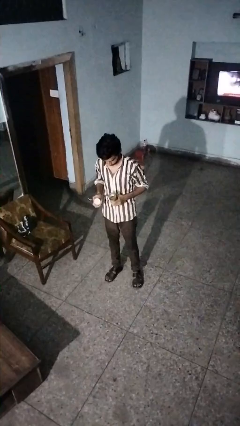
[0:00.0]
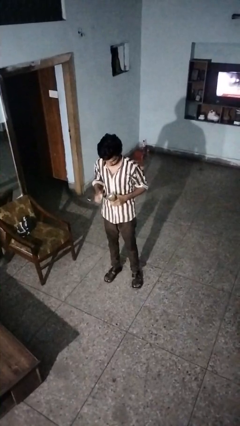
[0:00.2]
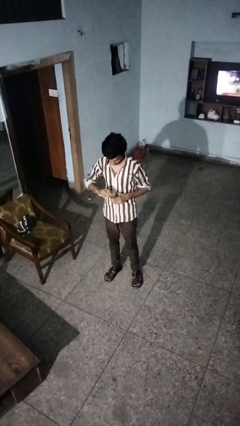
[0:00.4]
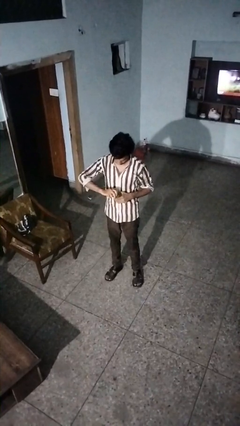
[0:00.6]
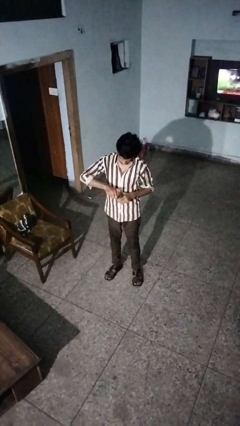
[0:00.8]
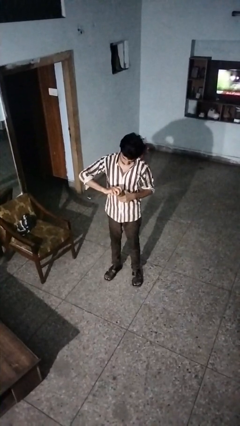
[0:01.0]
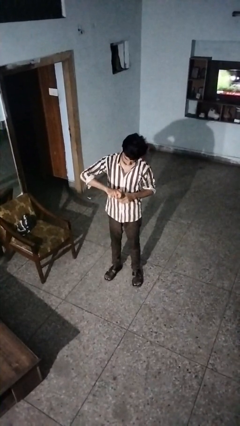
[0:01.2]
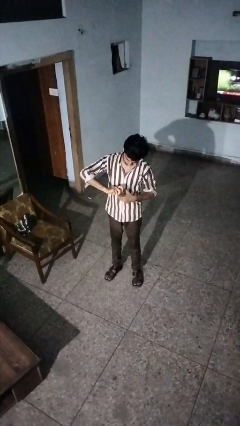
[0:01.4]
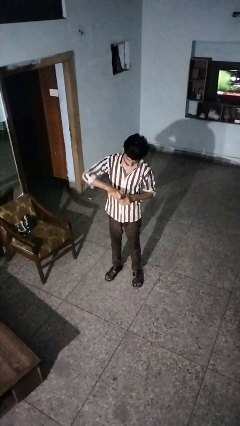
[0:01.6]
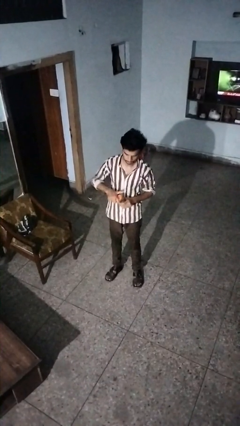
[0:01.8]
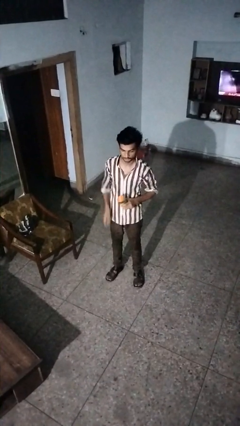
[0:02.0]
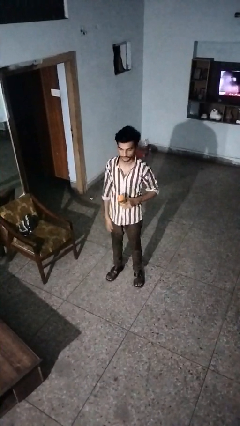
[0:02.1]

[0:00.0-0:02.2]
person closes jar

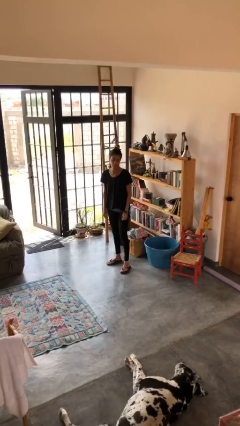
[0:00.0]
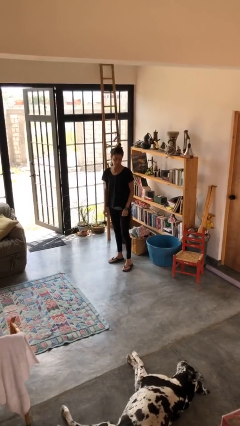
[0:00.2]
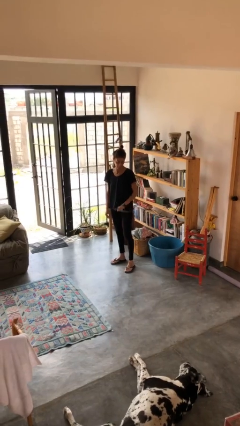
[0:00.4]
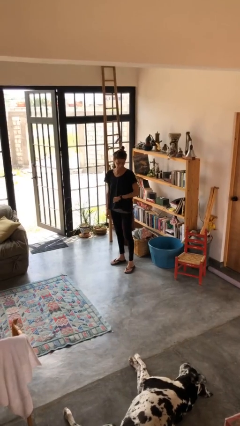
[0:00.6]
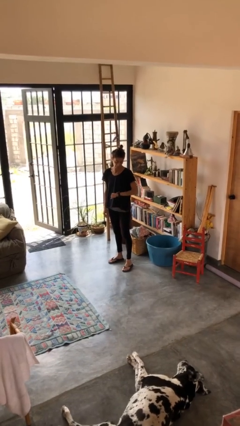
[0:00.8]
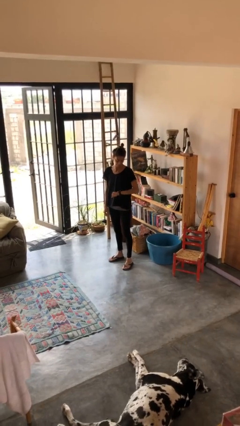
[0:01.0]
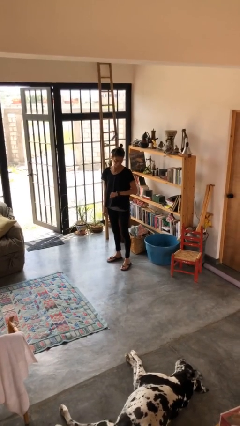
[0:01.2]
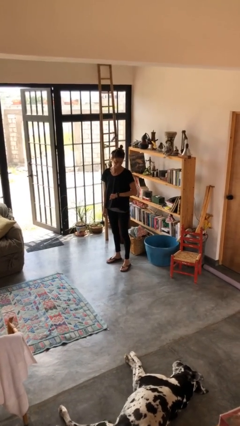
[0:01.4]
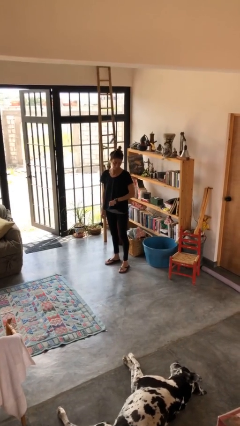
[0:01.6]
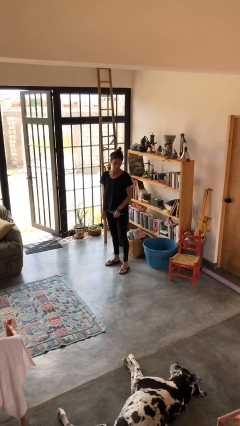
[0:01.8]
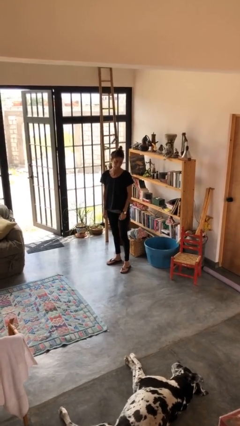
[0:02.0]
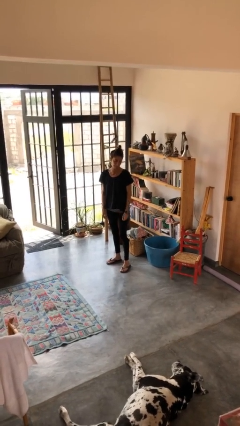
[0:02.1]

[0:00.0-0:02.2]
person looks at wristwatch

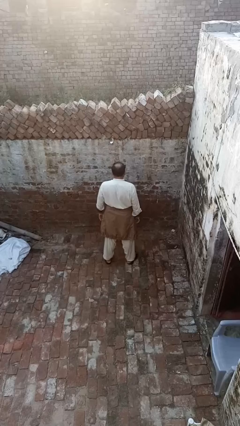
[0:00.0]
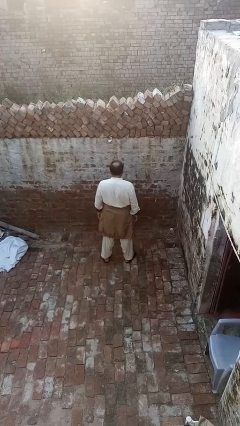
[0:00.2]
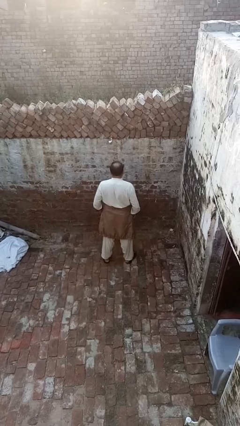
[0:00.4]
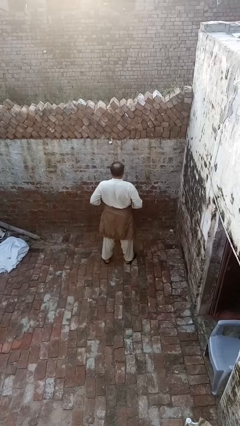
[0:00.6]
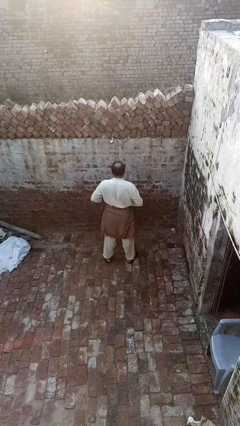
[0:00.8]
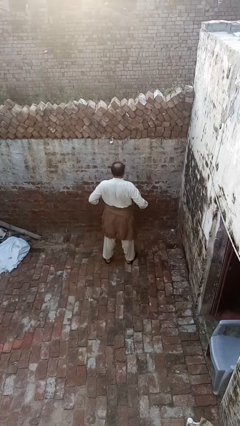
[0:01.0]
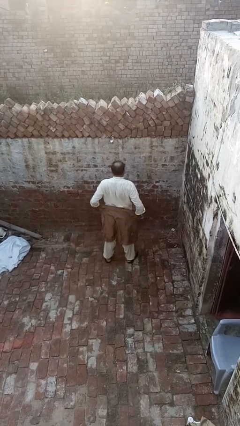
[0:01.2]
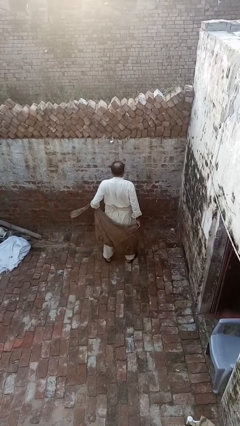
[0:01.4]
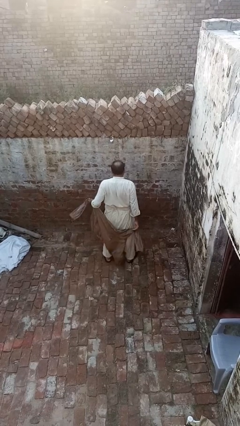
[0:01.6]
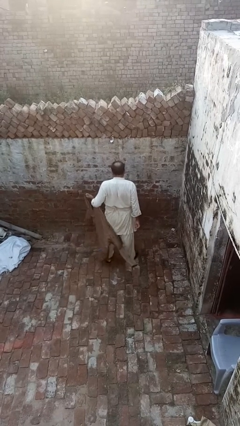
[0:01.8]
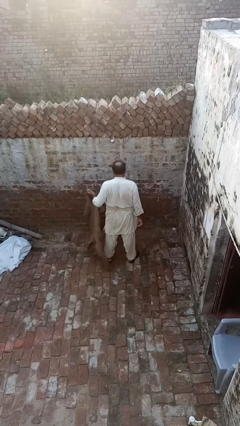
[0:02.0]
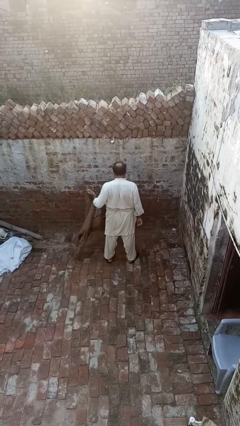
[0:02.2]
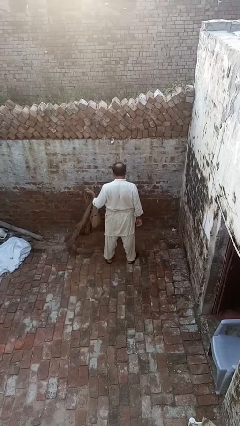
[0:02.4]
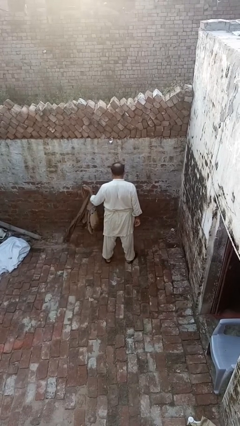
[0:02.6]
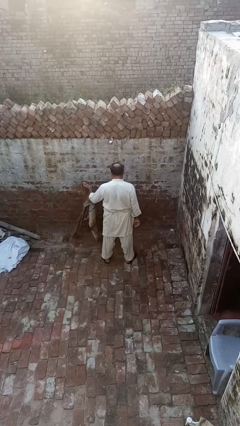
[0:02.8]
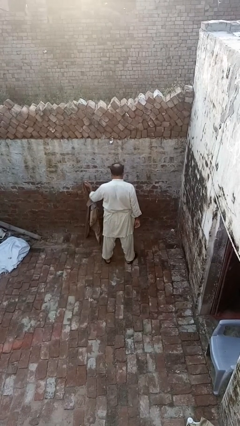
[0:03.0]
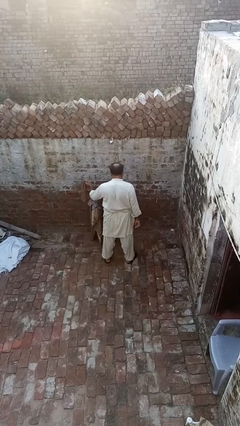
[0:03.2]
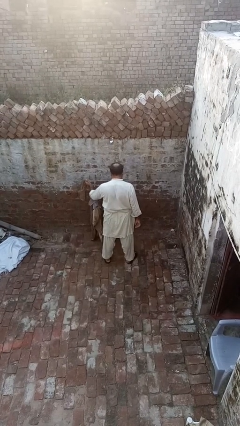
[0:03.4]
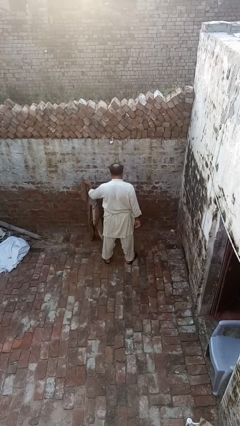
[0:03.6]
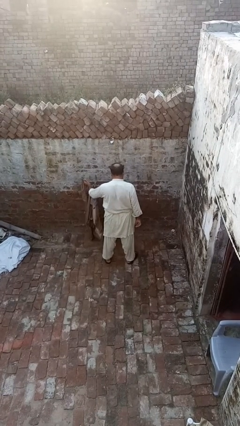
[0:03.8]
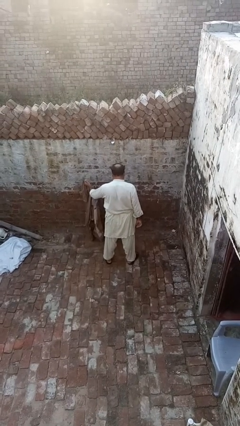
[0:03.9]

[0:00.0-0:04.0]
person unties jacket around waist

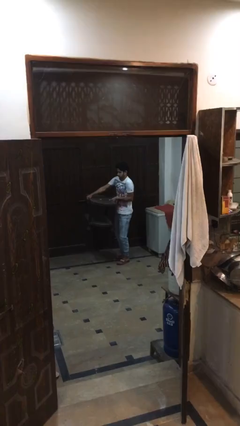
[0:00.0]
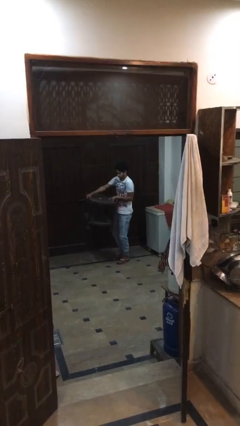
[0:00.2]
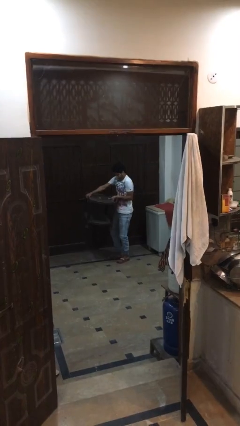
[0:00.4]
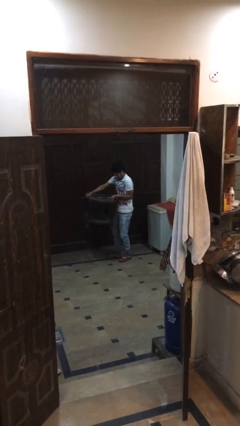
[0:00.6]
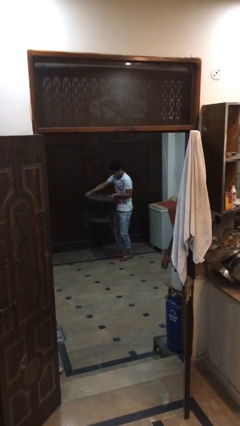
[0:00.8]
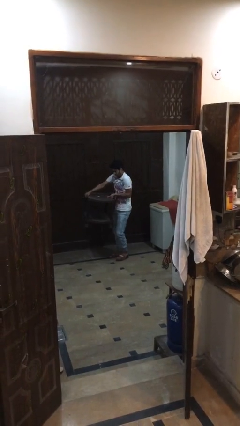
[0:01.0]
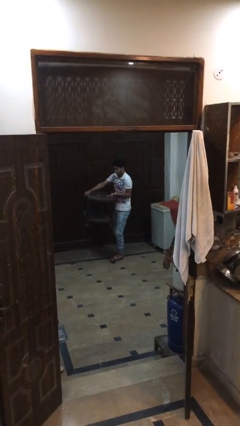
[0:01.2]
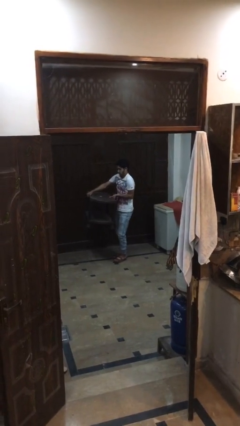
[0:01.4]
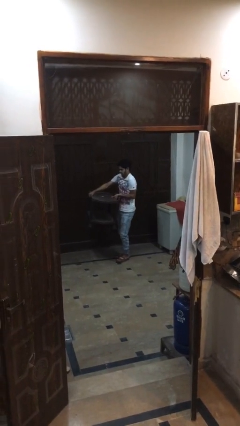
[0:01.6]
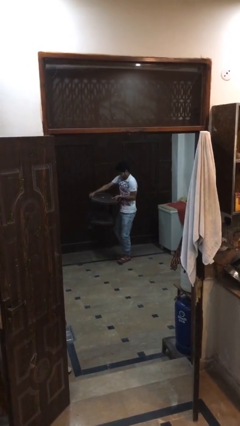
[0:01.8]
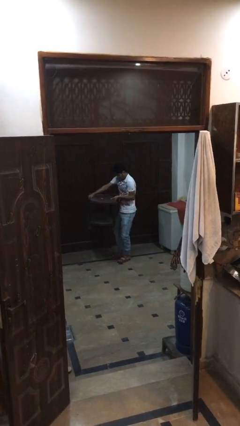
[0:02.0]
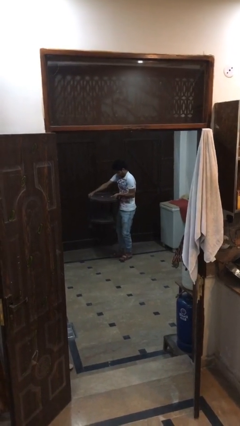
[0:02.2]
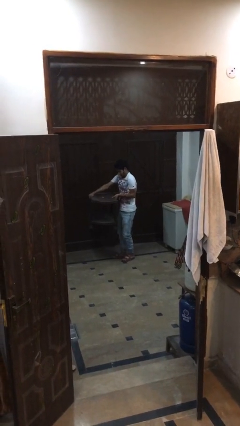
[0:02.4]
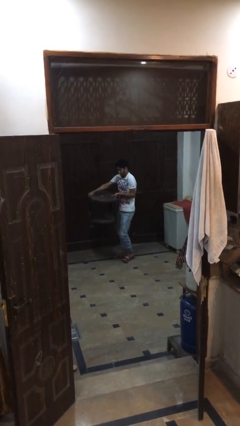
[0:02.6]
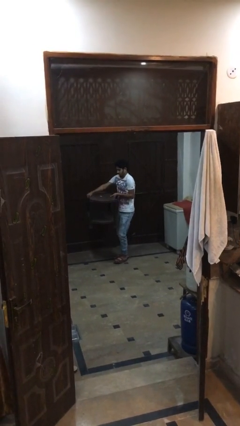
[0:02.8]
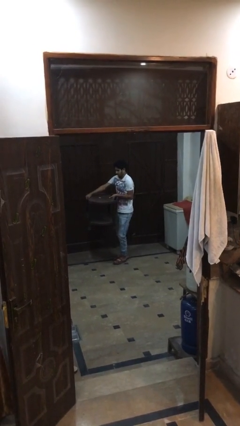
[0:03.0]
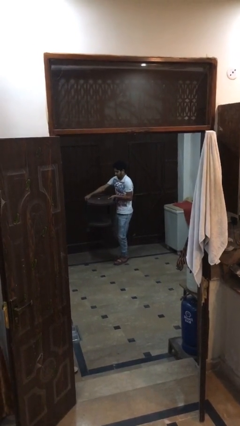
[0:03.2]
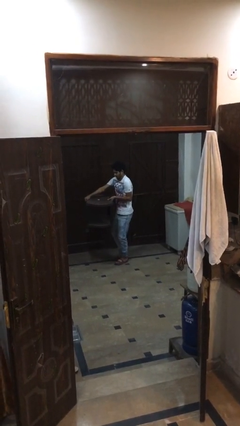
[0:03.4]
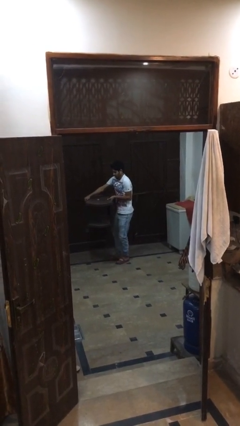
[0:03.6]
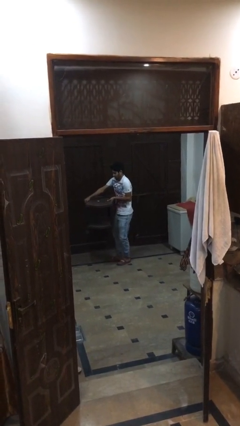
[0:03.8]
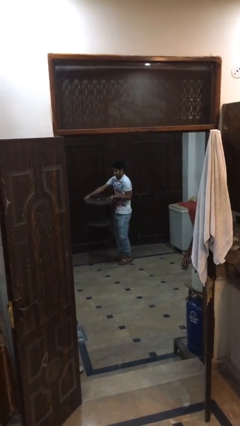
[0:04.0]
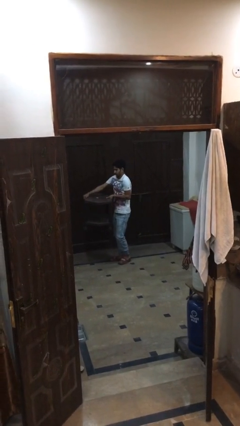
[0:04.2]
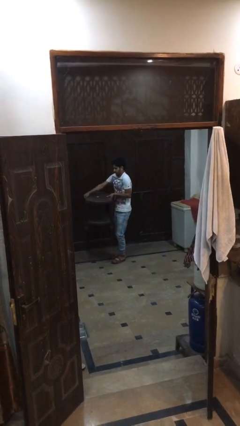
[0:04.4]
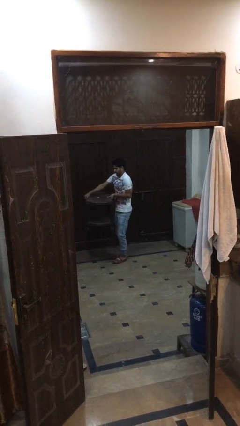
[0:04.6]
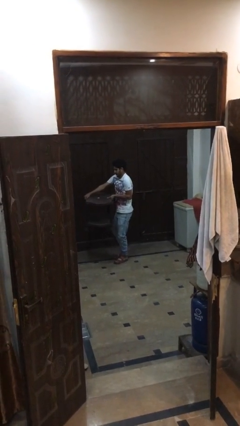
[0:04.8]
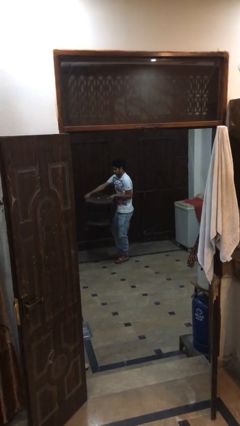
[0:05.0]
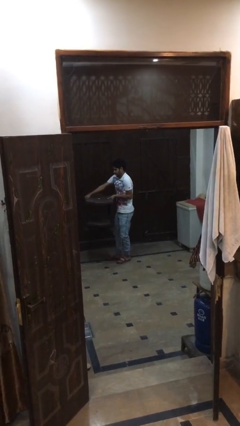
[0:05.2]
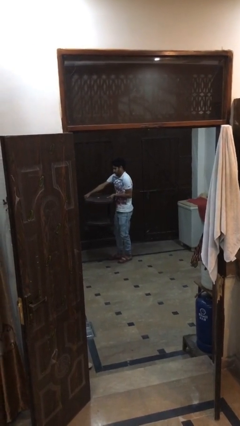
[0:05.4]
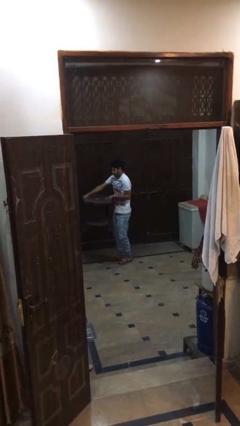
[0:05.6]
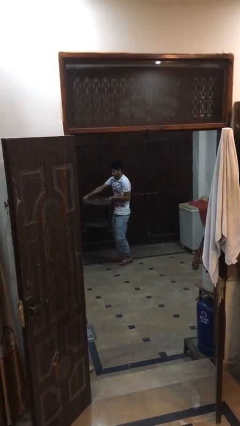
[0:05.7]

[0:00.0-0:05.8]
person carries heavy object

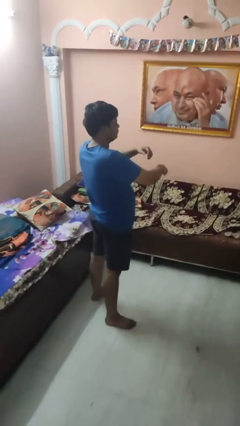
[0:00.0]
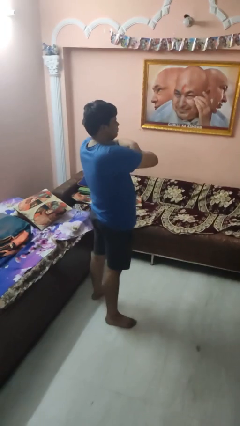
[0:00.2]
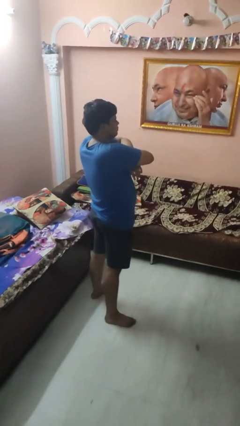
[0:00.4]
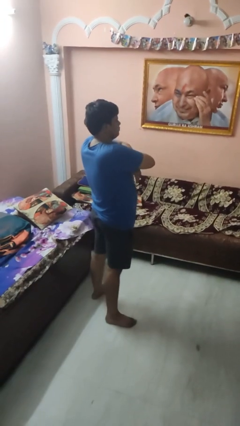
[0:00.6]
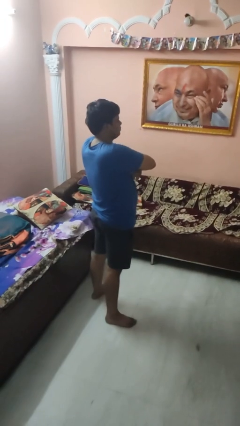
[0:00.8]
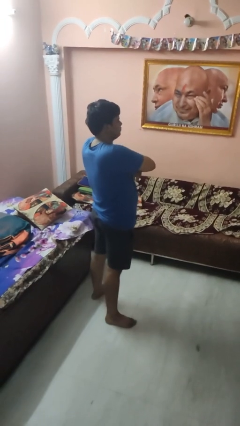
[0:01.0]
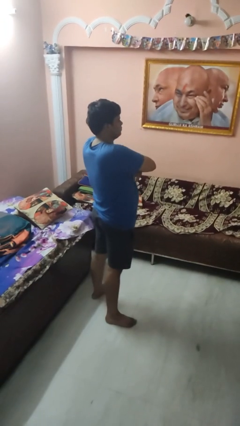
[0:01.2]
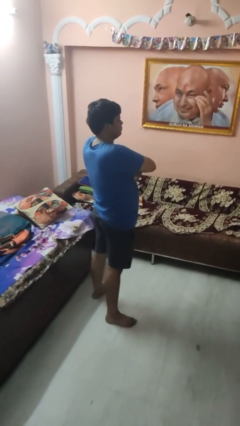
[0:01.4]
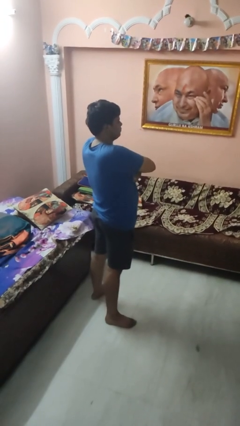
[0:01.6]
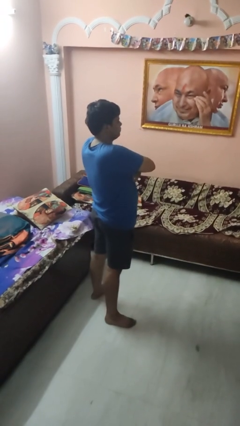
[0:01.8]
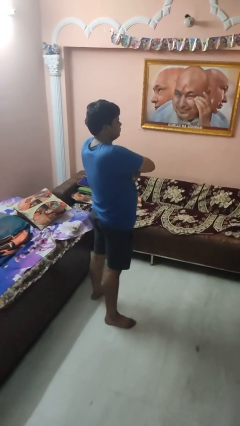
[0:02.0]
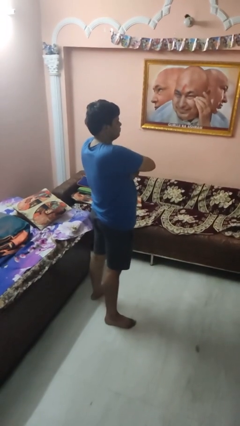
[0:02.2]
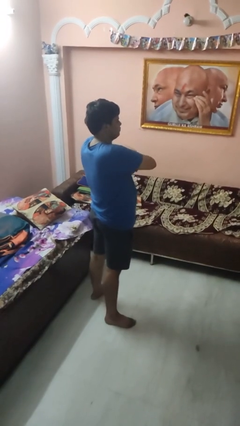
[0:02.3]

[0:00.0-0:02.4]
person crosses arms

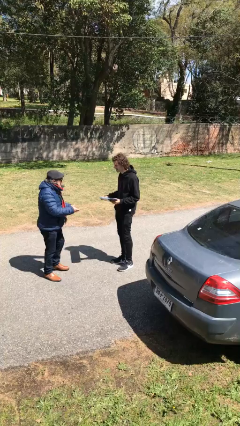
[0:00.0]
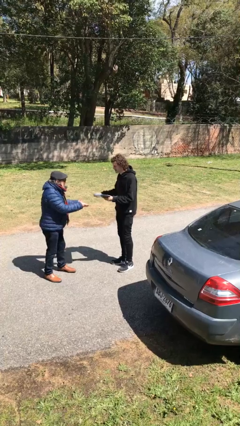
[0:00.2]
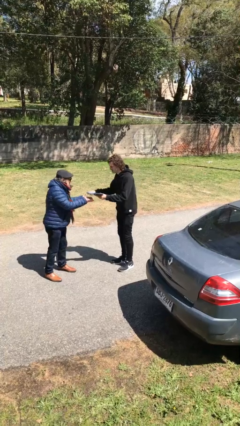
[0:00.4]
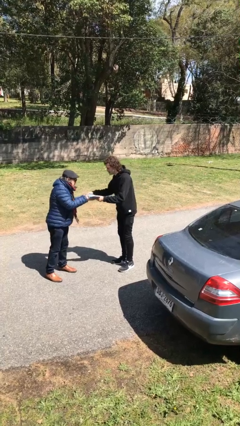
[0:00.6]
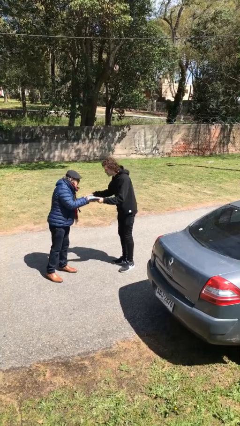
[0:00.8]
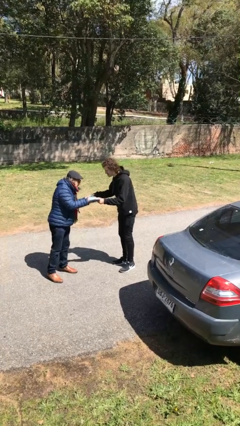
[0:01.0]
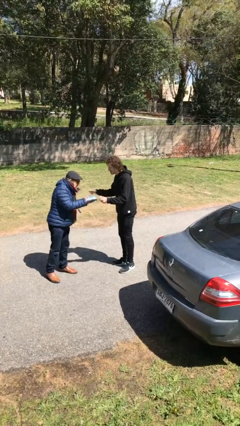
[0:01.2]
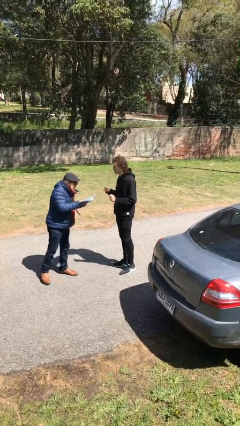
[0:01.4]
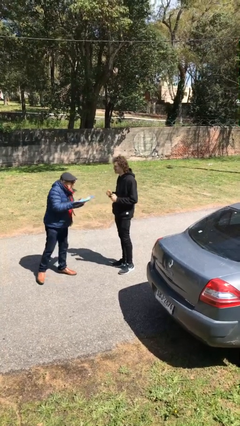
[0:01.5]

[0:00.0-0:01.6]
person transfers object to person
